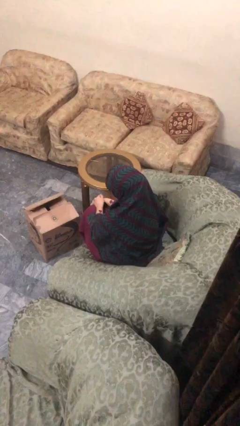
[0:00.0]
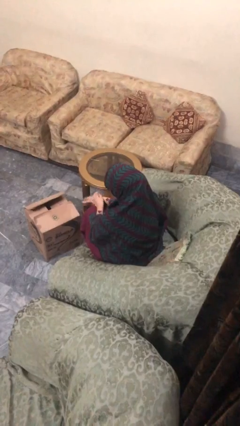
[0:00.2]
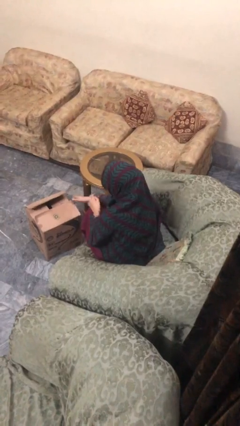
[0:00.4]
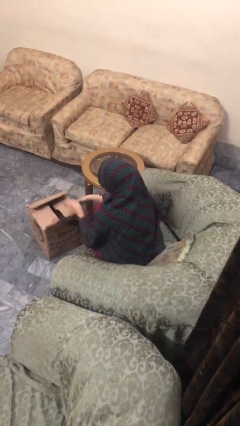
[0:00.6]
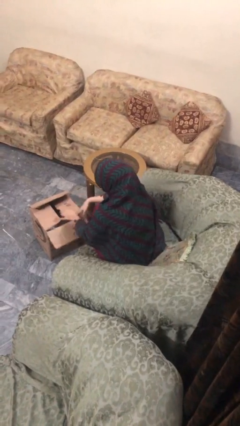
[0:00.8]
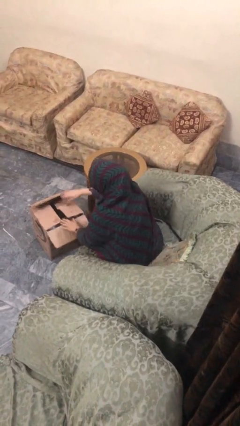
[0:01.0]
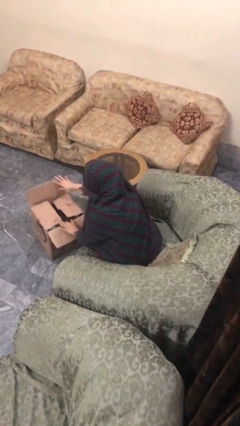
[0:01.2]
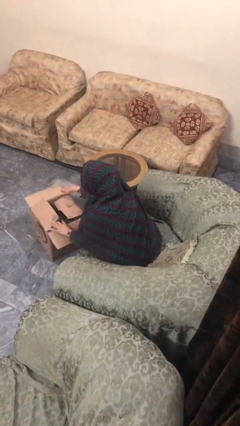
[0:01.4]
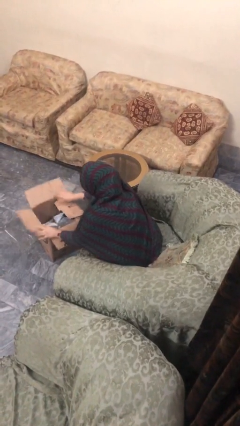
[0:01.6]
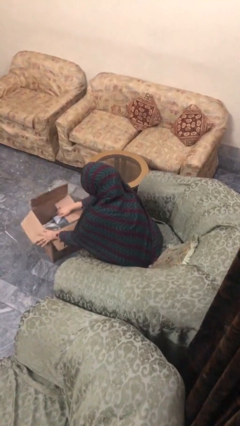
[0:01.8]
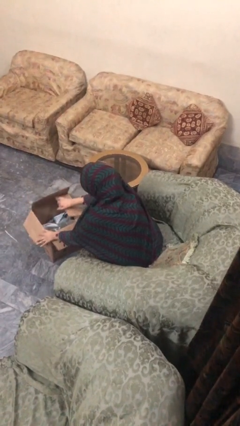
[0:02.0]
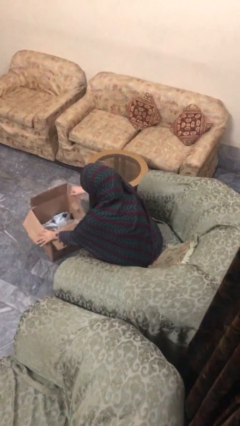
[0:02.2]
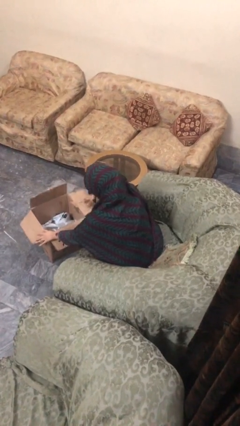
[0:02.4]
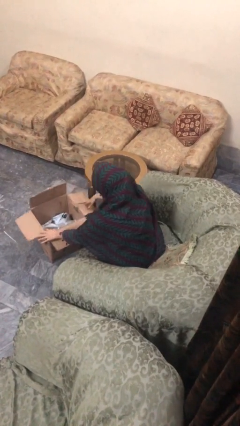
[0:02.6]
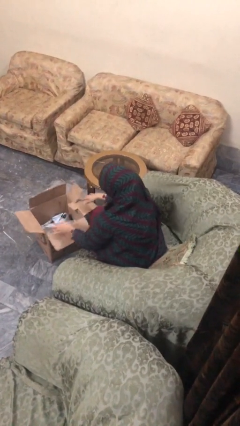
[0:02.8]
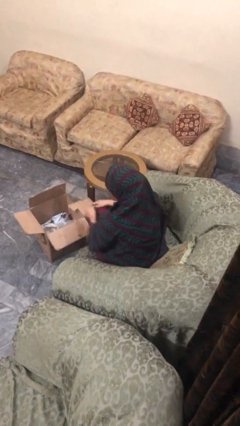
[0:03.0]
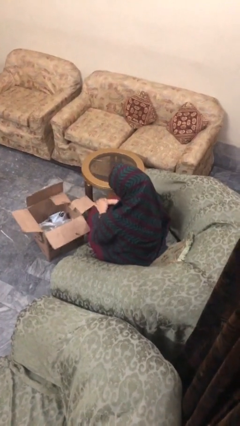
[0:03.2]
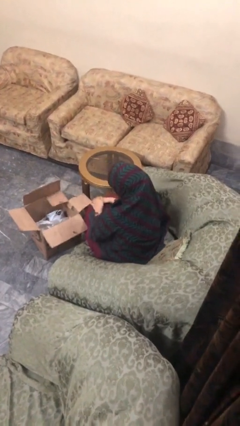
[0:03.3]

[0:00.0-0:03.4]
person opens box

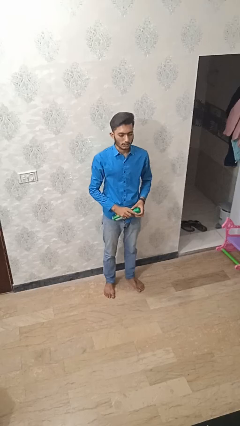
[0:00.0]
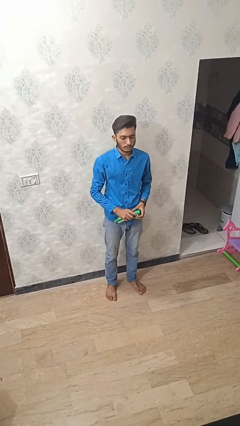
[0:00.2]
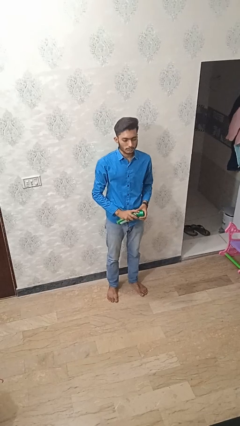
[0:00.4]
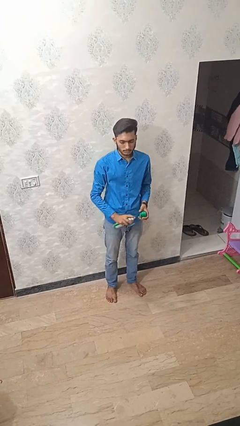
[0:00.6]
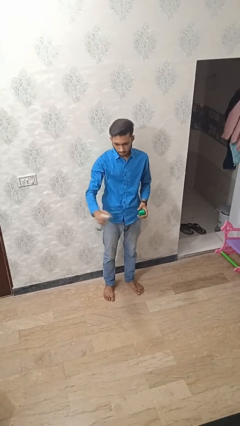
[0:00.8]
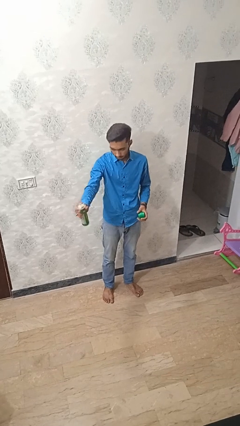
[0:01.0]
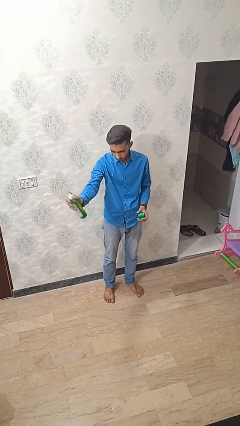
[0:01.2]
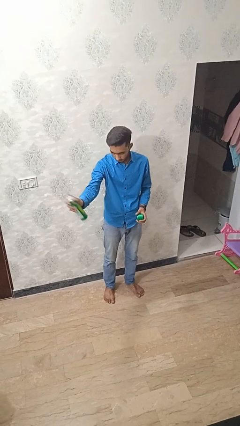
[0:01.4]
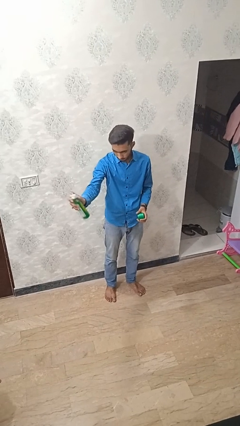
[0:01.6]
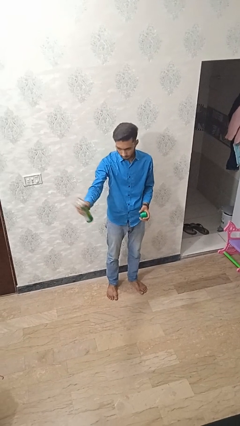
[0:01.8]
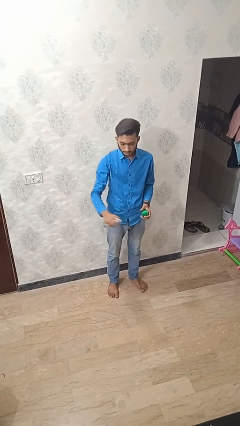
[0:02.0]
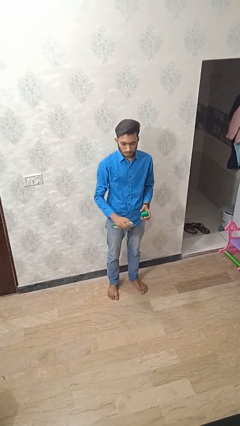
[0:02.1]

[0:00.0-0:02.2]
person sprays from bottle

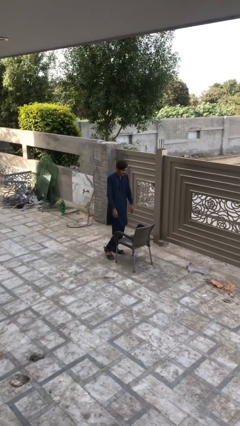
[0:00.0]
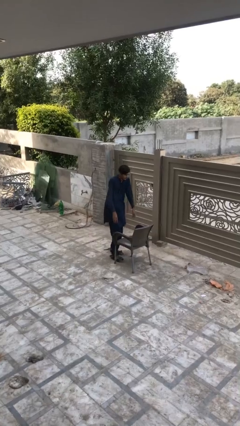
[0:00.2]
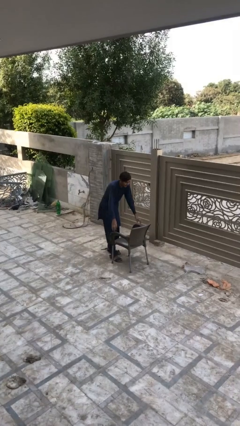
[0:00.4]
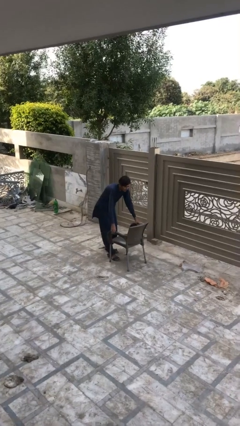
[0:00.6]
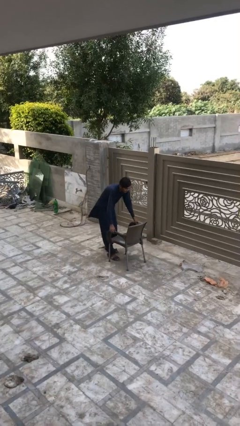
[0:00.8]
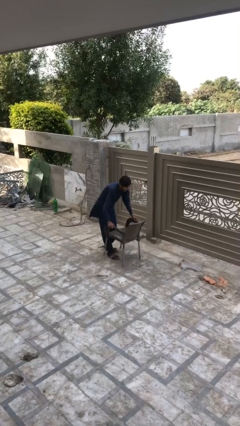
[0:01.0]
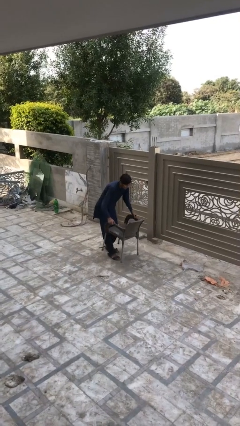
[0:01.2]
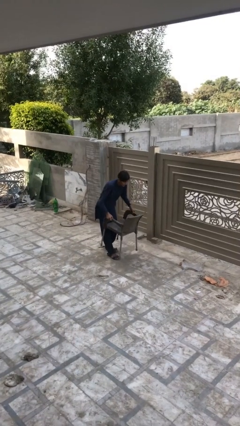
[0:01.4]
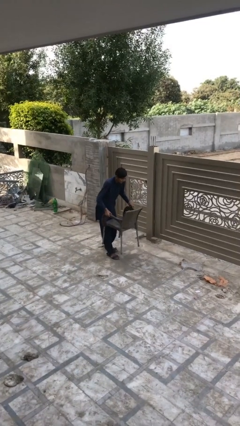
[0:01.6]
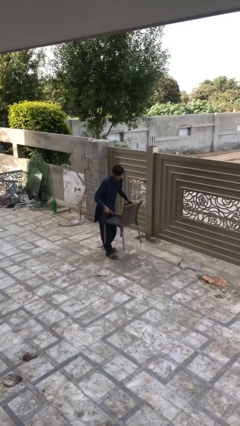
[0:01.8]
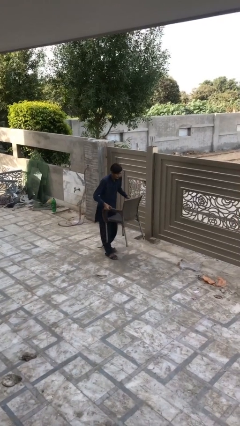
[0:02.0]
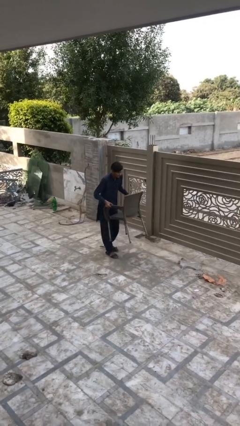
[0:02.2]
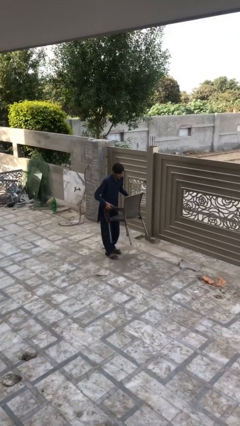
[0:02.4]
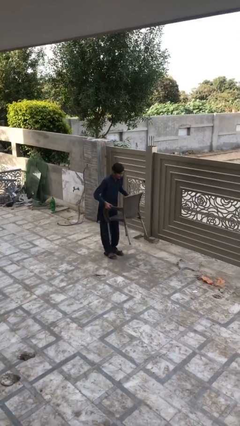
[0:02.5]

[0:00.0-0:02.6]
person picks up object from floor

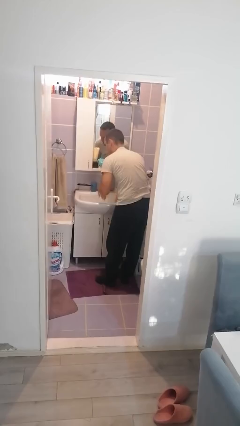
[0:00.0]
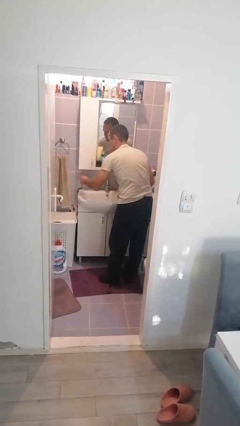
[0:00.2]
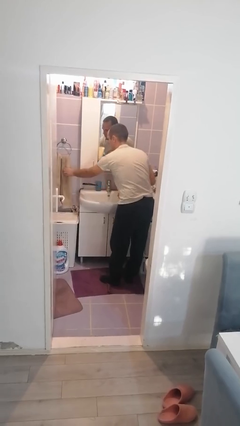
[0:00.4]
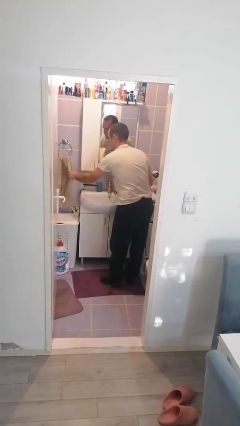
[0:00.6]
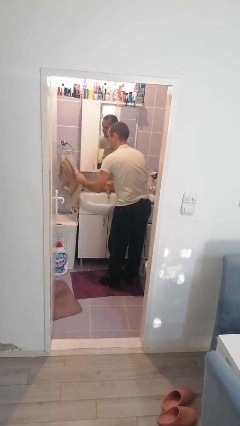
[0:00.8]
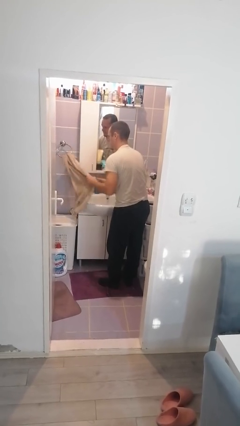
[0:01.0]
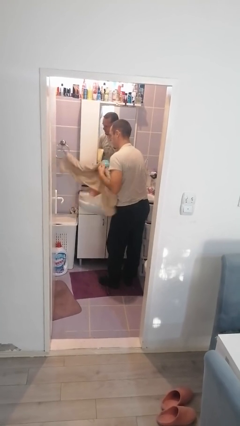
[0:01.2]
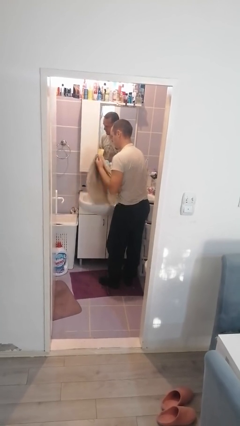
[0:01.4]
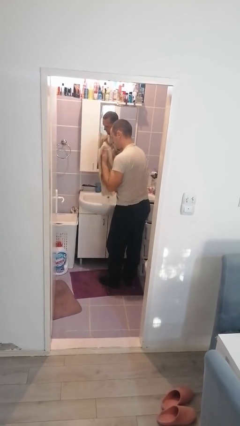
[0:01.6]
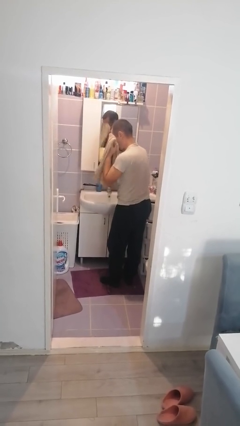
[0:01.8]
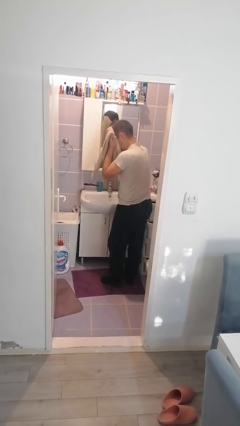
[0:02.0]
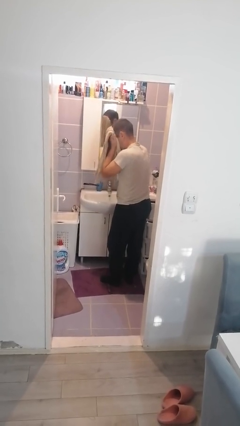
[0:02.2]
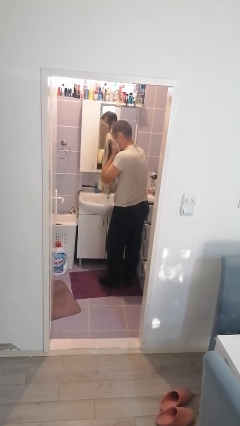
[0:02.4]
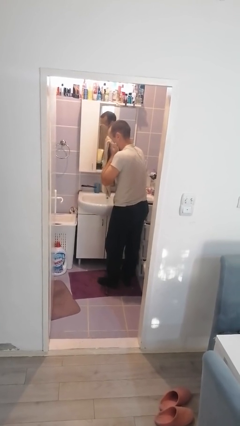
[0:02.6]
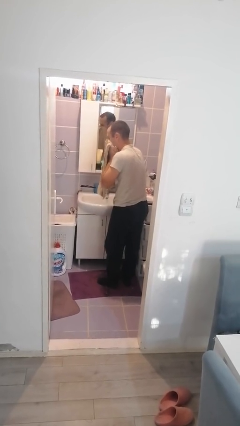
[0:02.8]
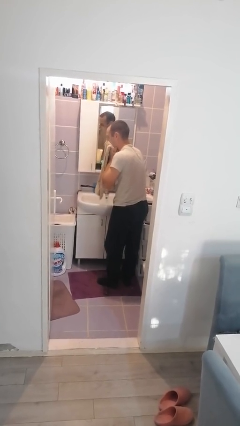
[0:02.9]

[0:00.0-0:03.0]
person dries face with towel

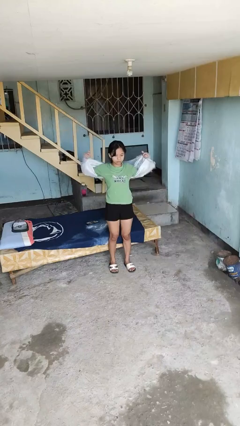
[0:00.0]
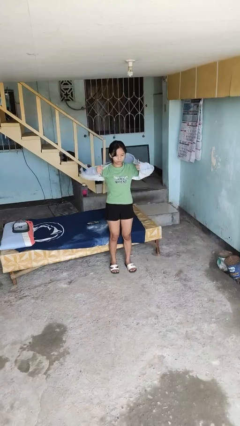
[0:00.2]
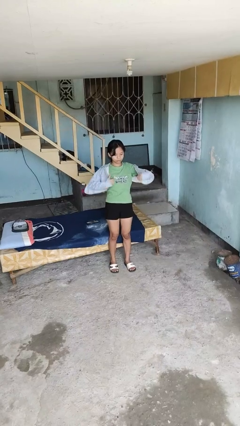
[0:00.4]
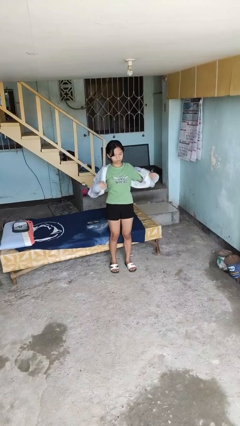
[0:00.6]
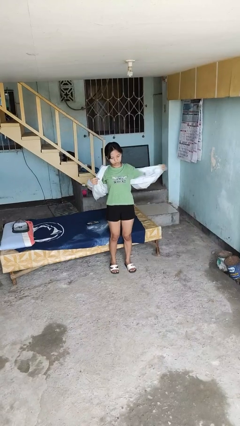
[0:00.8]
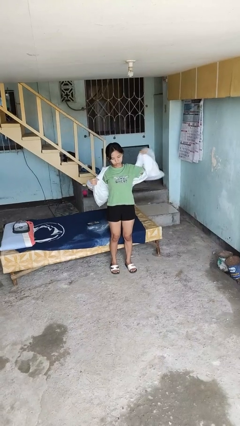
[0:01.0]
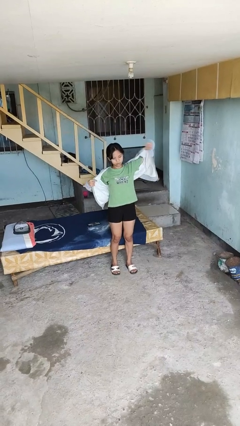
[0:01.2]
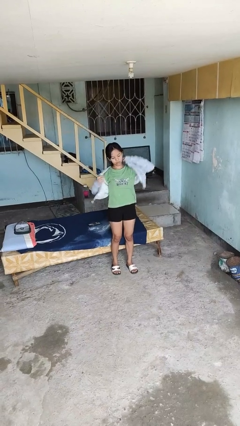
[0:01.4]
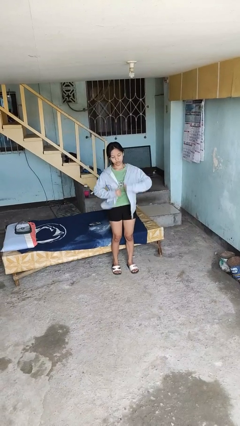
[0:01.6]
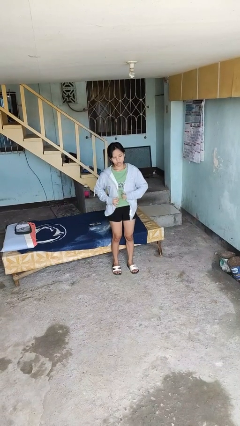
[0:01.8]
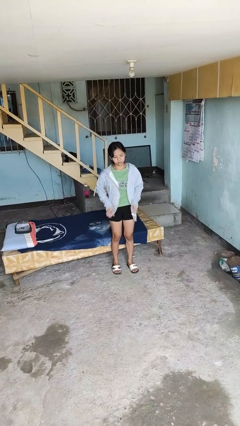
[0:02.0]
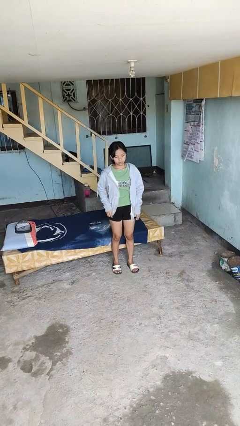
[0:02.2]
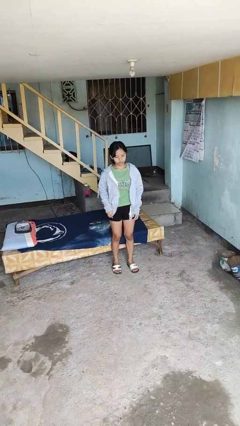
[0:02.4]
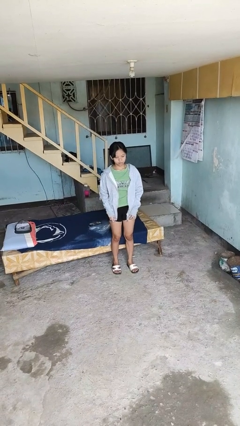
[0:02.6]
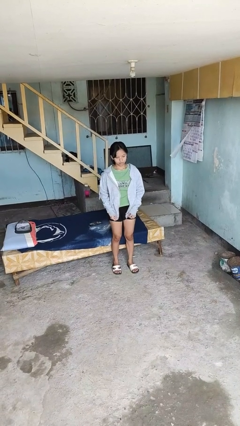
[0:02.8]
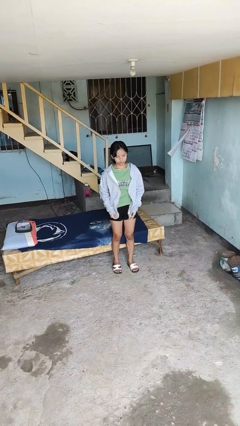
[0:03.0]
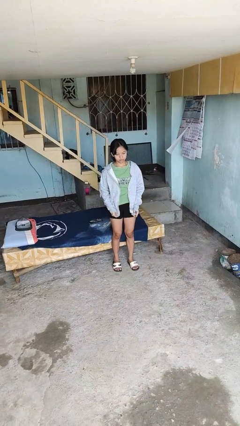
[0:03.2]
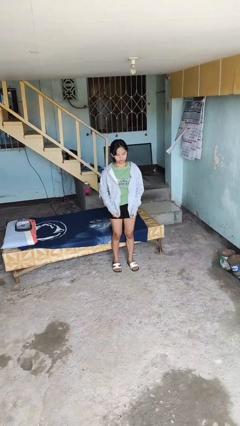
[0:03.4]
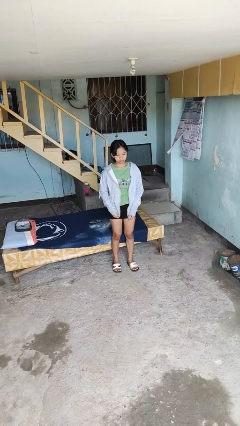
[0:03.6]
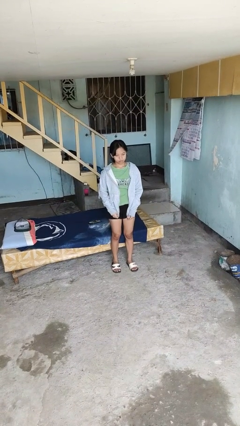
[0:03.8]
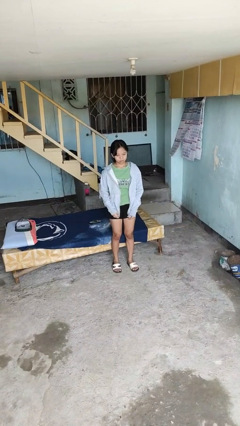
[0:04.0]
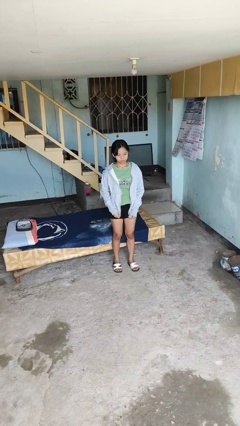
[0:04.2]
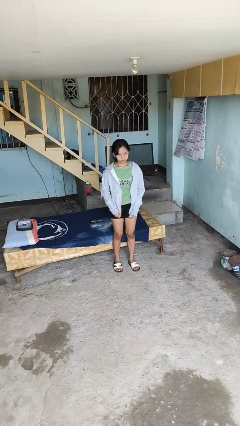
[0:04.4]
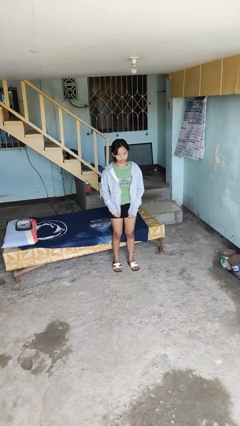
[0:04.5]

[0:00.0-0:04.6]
person puts on jacket

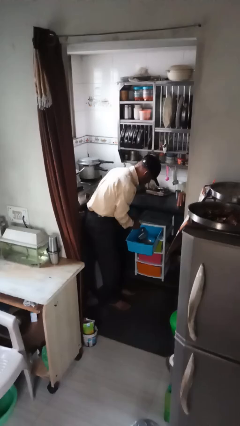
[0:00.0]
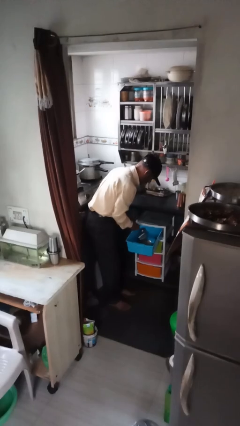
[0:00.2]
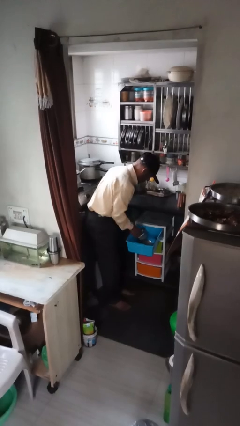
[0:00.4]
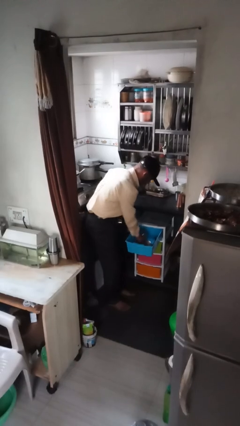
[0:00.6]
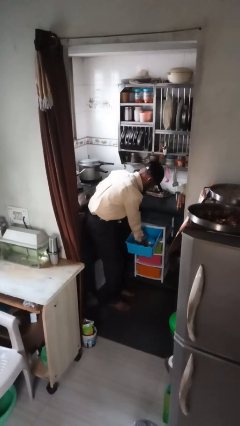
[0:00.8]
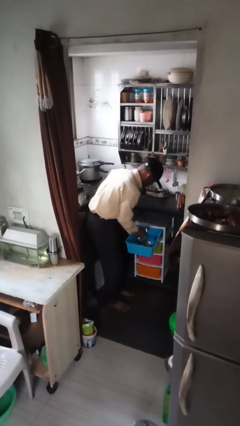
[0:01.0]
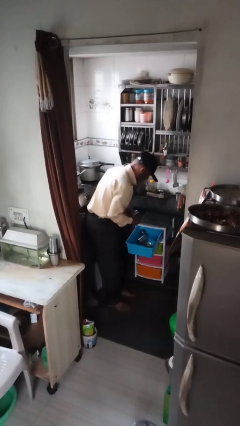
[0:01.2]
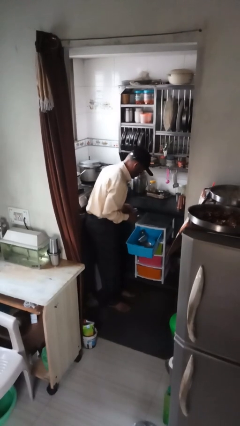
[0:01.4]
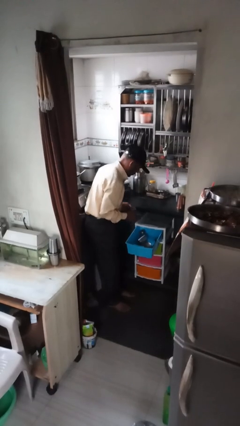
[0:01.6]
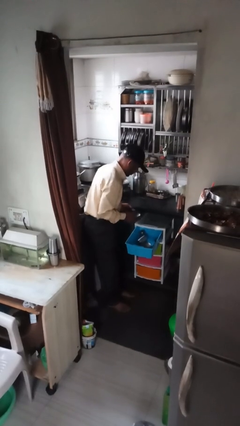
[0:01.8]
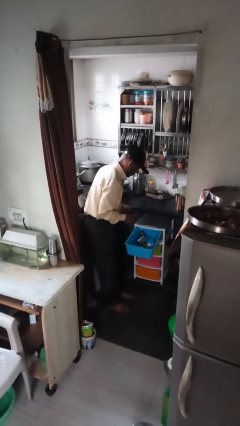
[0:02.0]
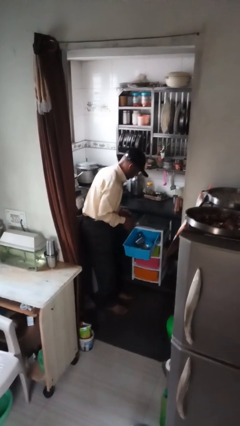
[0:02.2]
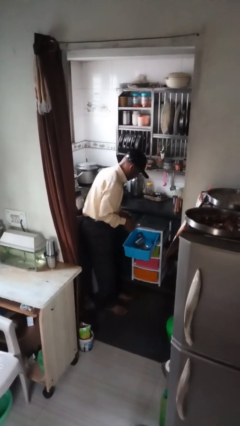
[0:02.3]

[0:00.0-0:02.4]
person takes object from kitchen drawer
